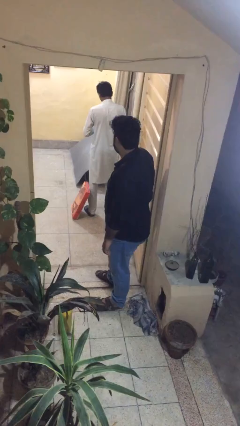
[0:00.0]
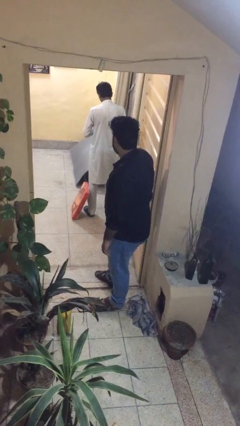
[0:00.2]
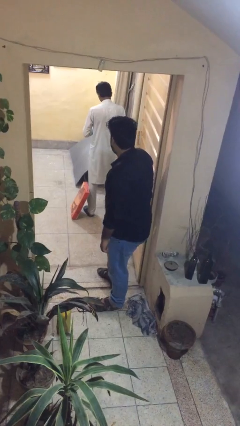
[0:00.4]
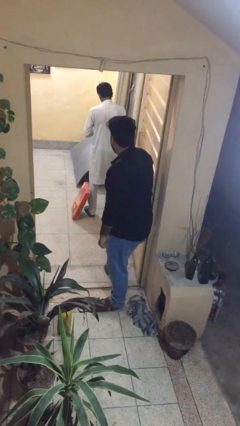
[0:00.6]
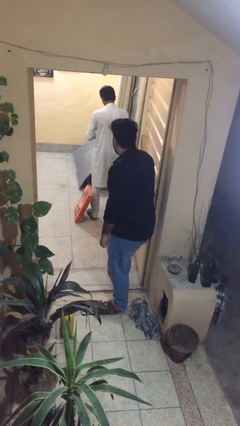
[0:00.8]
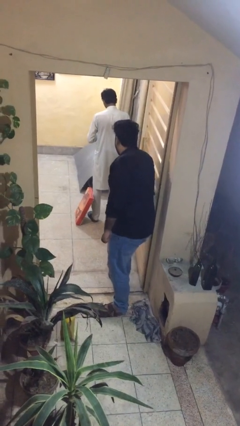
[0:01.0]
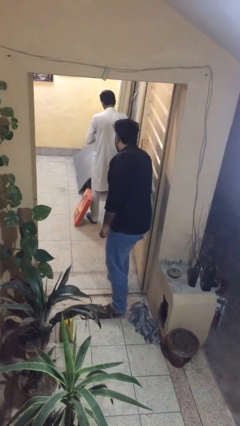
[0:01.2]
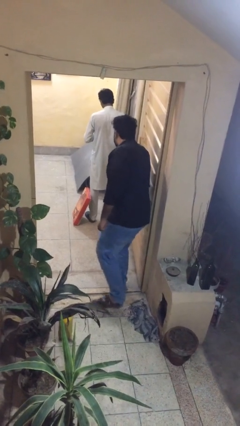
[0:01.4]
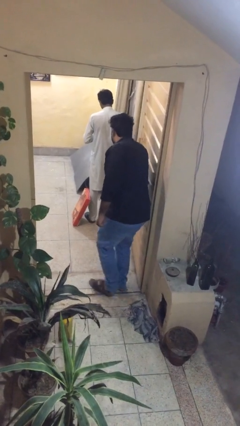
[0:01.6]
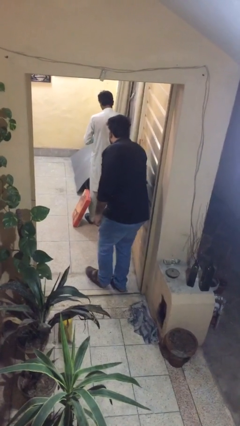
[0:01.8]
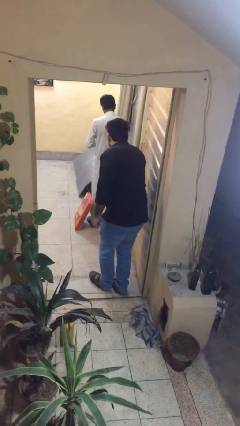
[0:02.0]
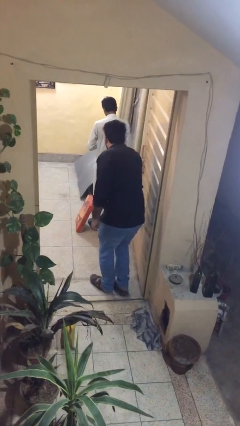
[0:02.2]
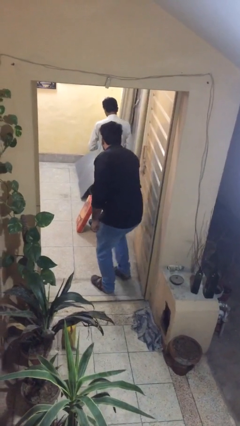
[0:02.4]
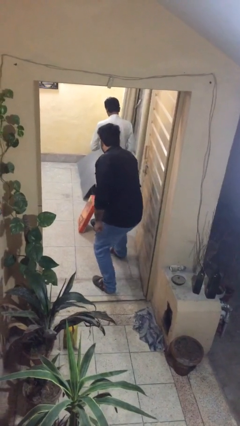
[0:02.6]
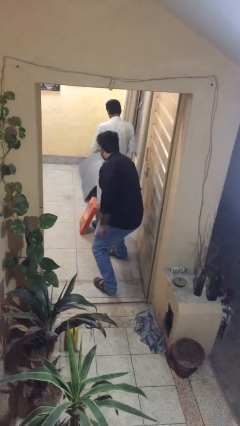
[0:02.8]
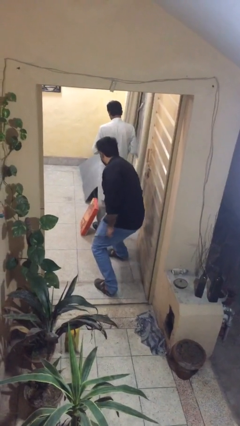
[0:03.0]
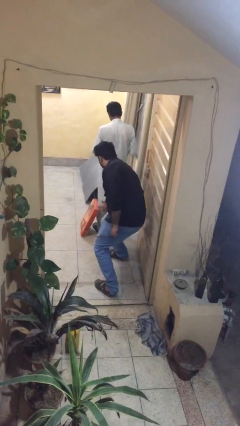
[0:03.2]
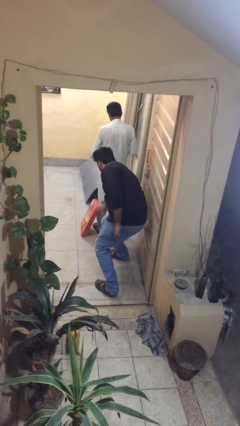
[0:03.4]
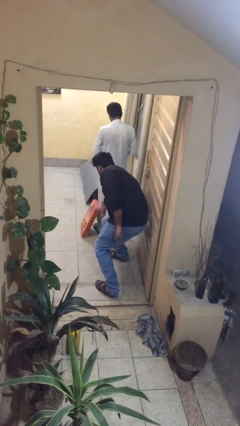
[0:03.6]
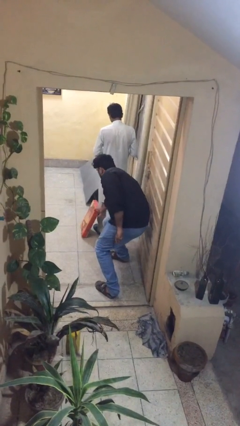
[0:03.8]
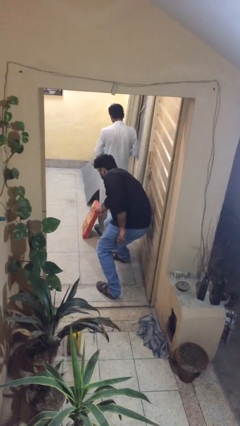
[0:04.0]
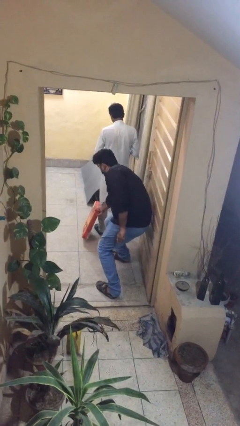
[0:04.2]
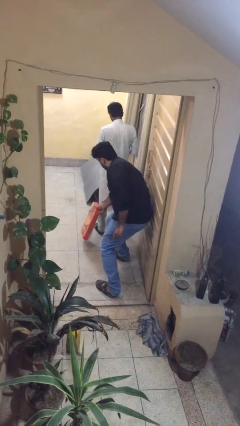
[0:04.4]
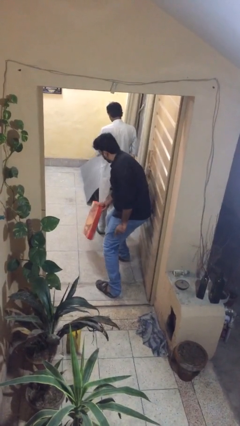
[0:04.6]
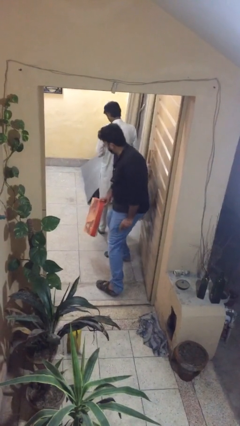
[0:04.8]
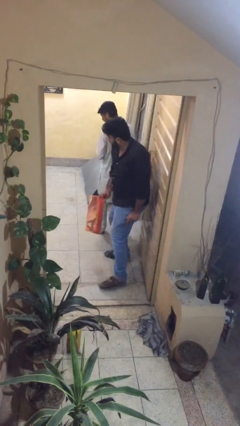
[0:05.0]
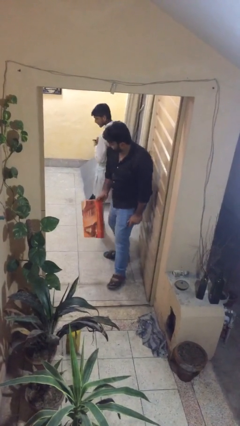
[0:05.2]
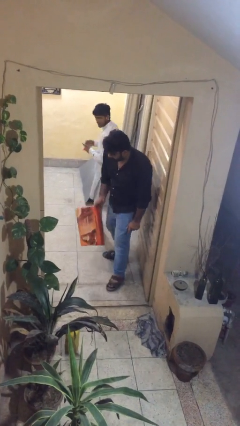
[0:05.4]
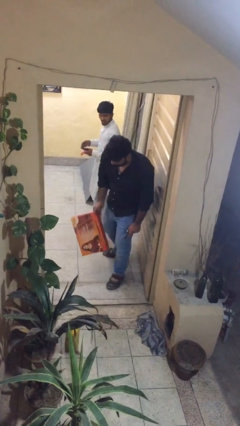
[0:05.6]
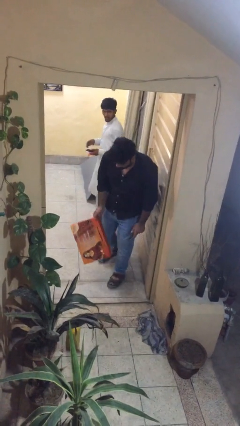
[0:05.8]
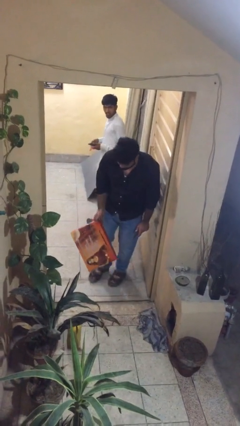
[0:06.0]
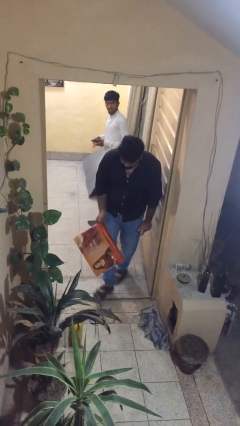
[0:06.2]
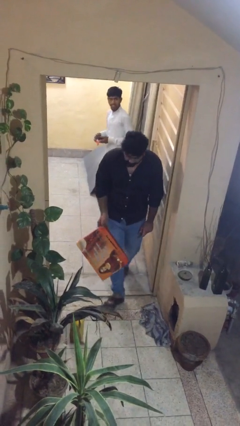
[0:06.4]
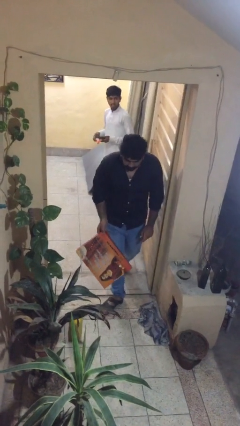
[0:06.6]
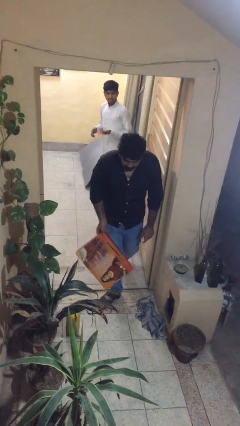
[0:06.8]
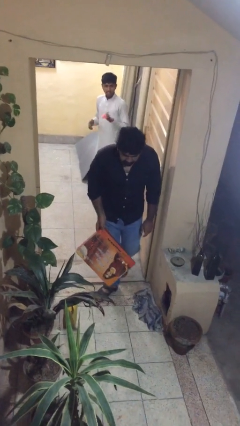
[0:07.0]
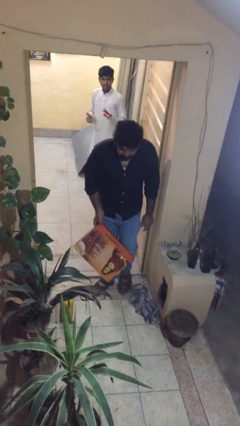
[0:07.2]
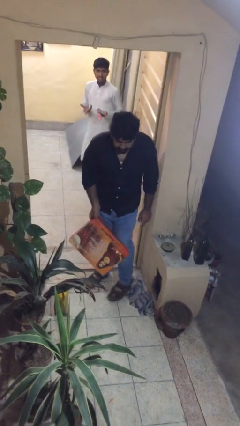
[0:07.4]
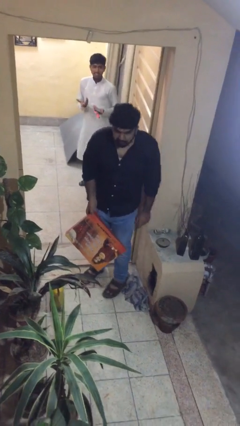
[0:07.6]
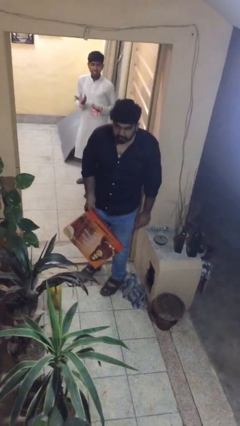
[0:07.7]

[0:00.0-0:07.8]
person steals object from person

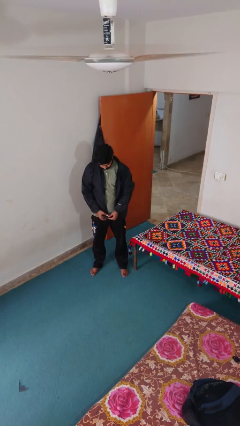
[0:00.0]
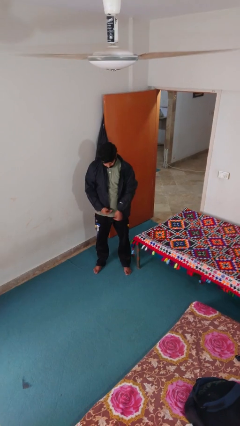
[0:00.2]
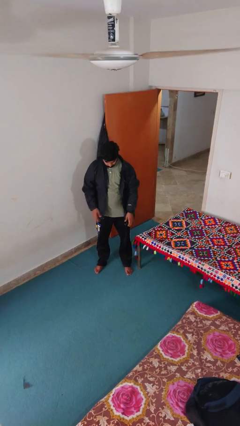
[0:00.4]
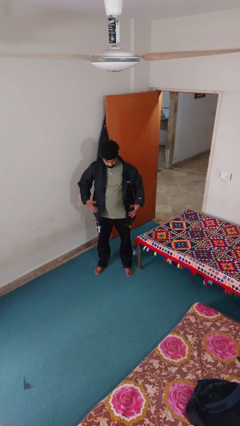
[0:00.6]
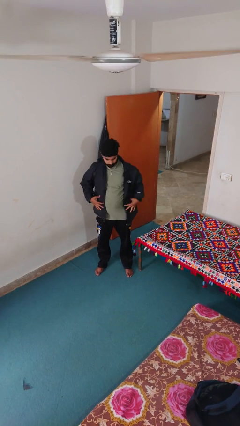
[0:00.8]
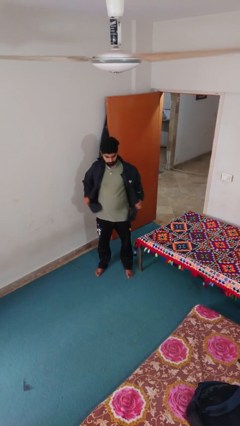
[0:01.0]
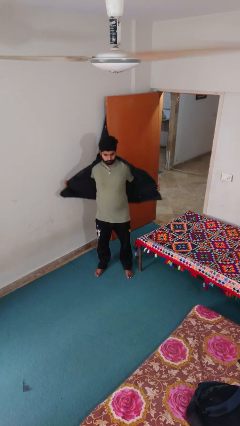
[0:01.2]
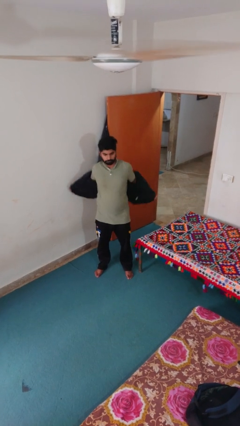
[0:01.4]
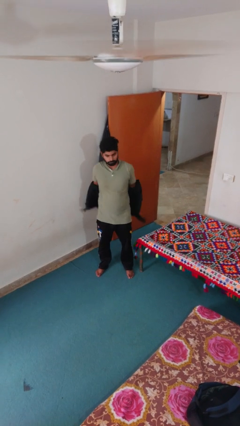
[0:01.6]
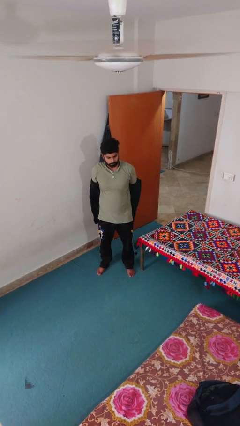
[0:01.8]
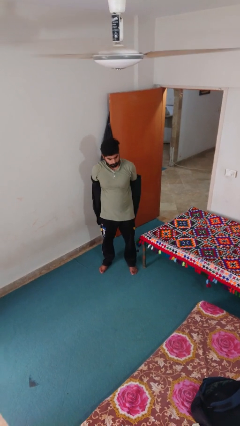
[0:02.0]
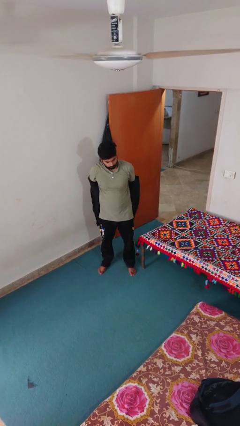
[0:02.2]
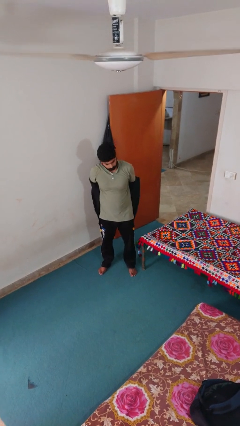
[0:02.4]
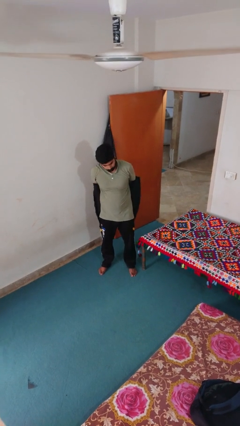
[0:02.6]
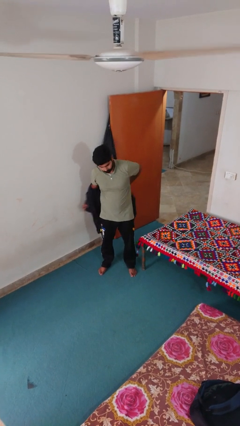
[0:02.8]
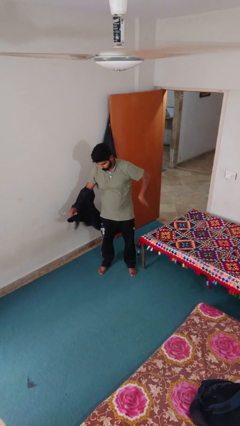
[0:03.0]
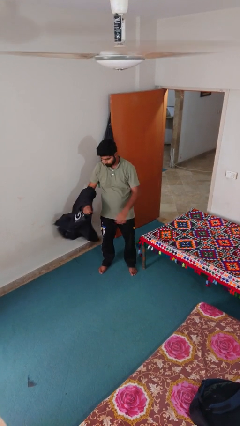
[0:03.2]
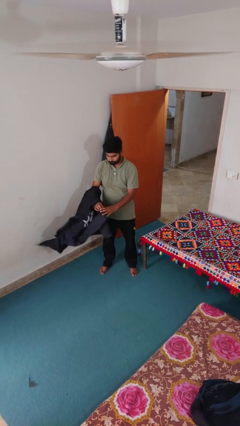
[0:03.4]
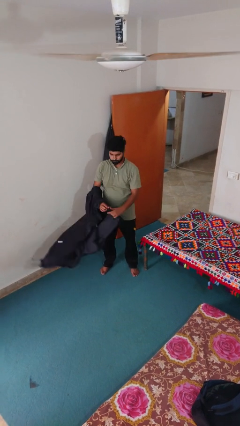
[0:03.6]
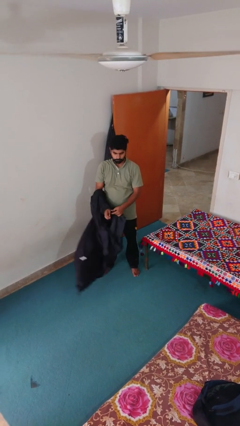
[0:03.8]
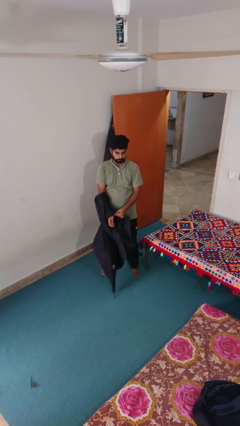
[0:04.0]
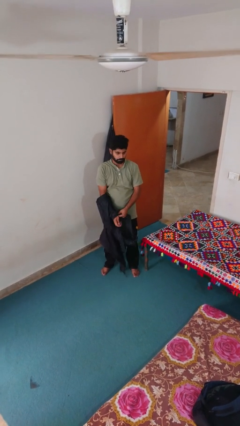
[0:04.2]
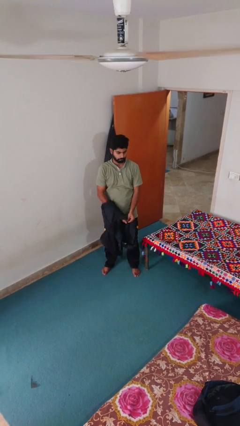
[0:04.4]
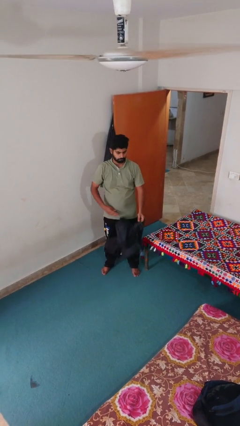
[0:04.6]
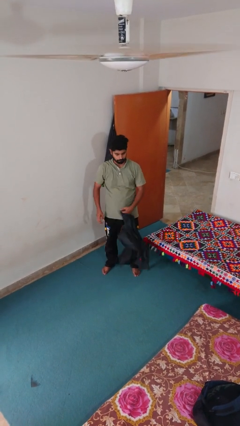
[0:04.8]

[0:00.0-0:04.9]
person takes off jacket

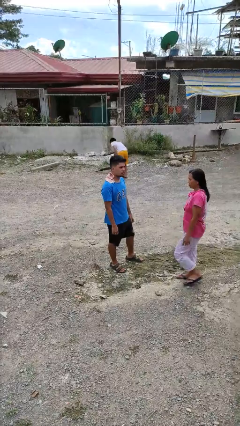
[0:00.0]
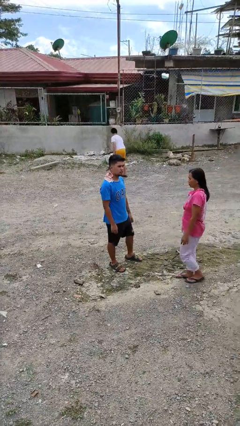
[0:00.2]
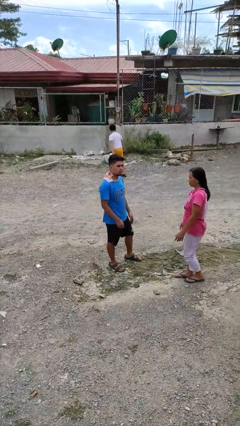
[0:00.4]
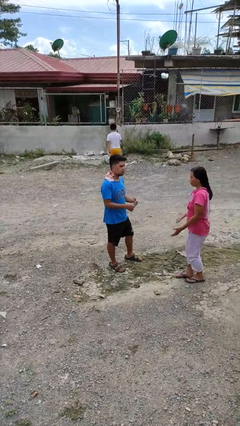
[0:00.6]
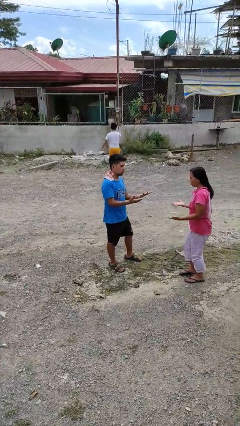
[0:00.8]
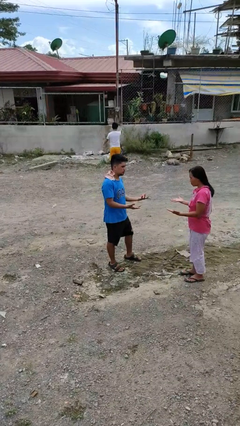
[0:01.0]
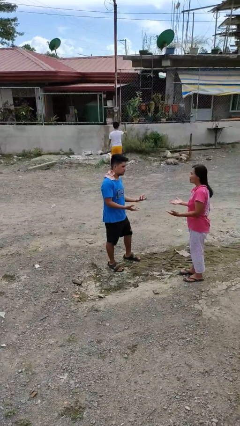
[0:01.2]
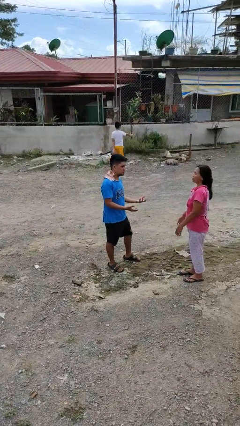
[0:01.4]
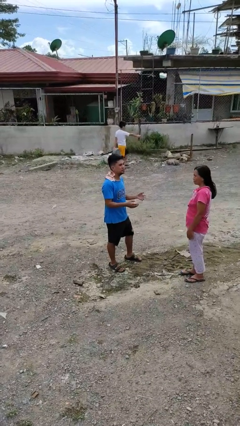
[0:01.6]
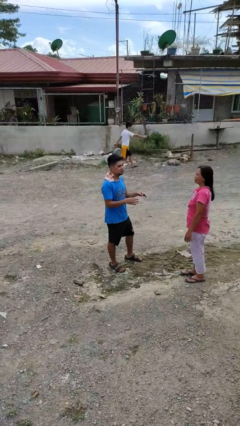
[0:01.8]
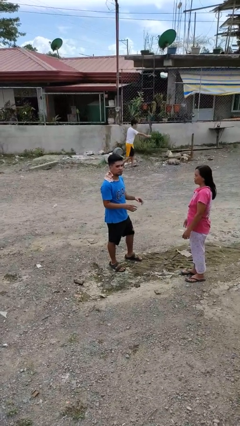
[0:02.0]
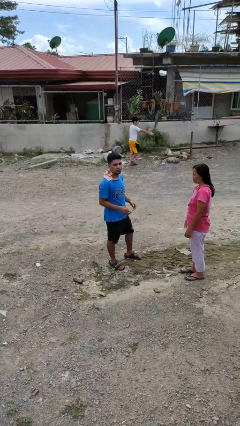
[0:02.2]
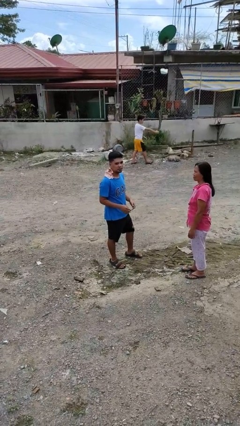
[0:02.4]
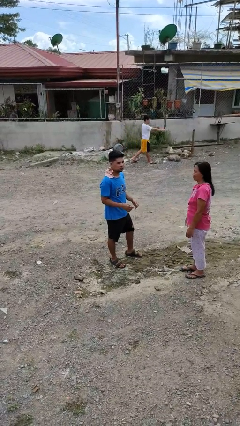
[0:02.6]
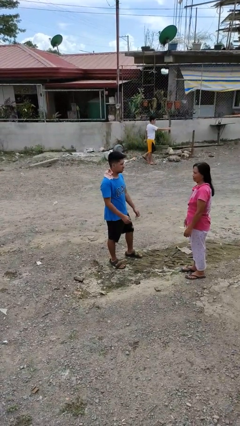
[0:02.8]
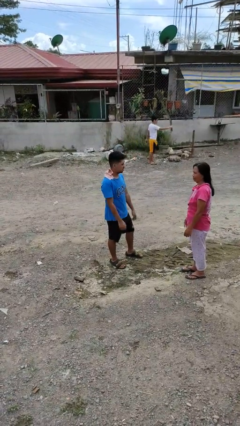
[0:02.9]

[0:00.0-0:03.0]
person talks to person

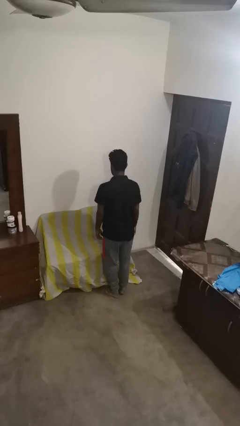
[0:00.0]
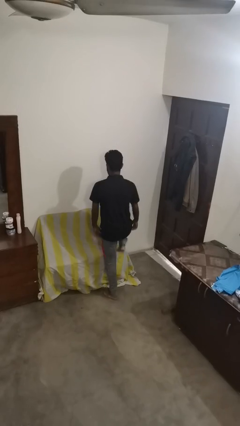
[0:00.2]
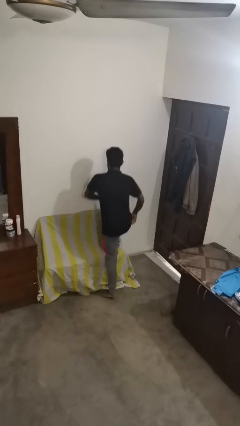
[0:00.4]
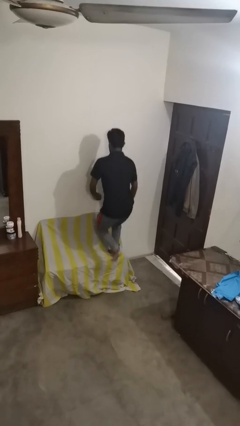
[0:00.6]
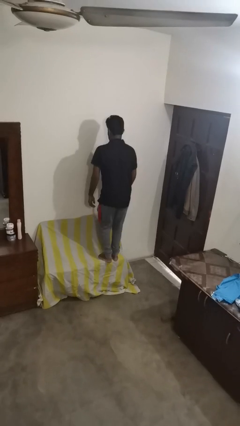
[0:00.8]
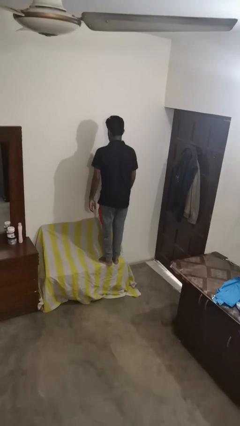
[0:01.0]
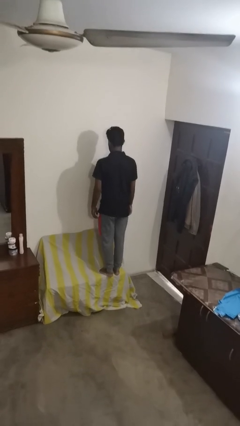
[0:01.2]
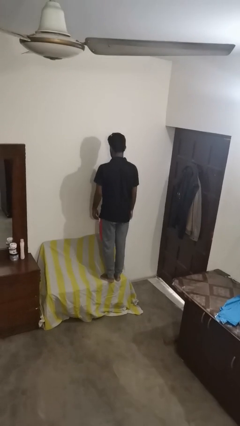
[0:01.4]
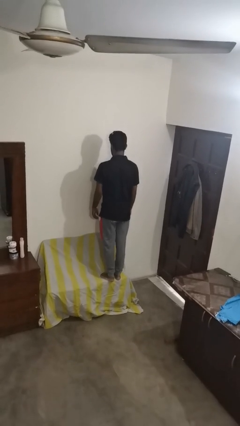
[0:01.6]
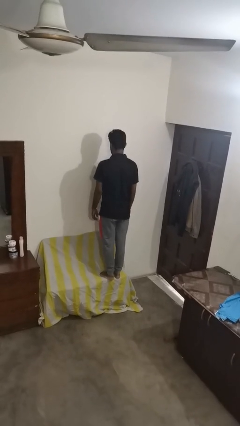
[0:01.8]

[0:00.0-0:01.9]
person jumps on couch

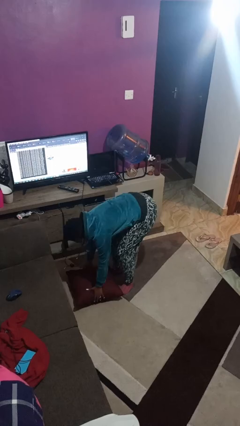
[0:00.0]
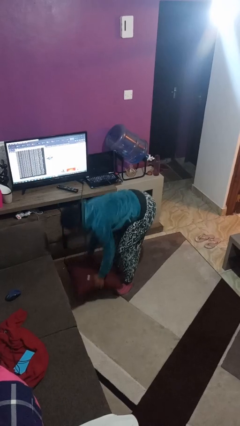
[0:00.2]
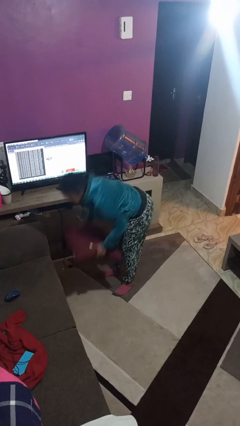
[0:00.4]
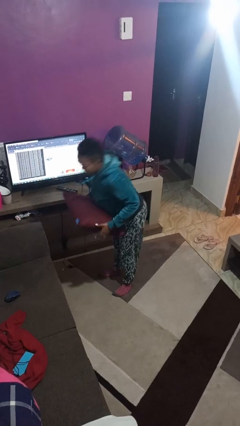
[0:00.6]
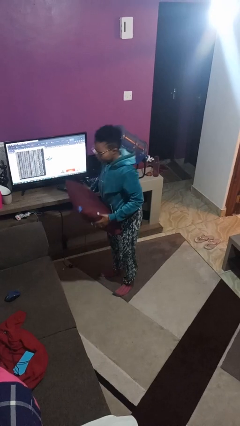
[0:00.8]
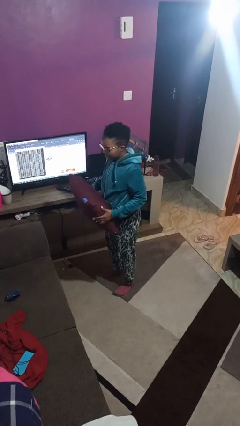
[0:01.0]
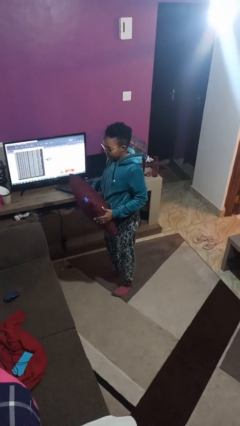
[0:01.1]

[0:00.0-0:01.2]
person picks up object from floor
